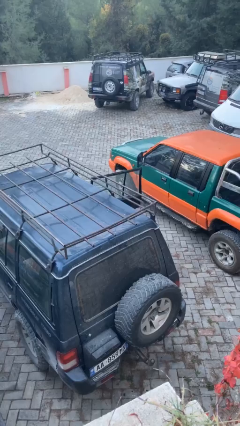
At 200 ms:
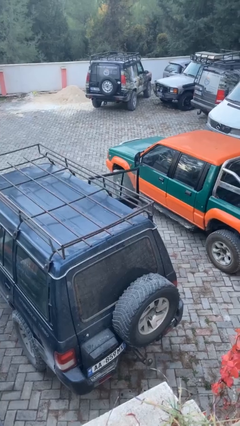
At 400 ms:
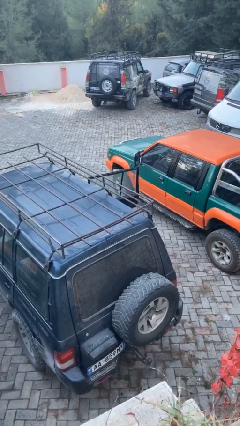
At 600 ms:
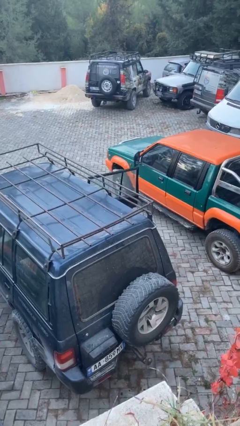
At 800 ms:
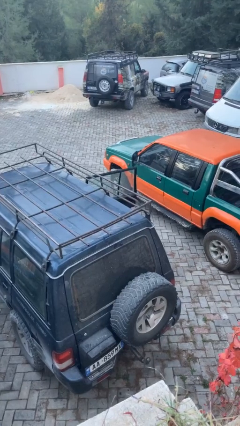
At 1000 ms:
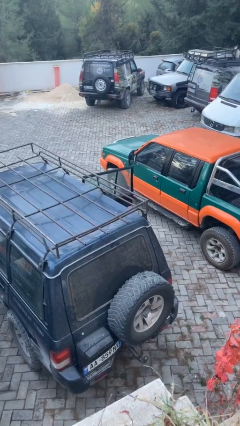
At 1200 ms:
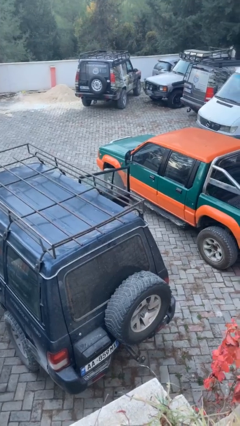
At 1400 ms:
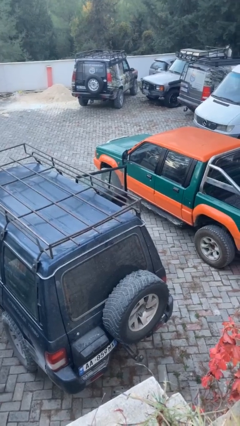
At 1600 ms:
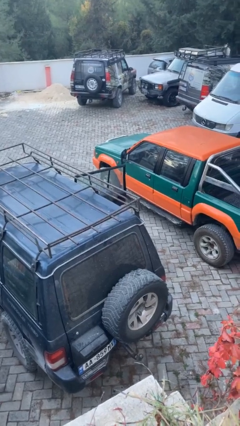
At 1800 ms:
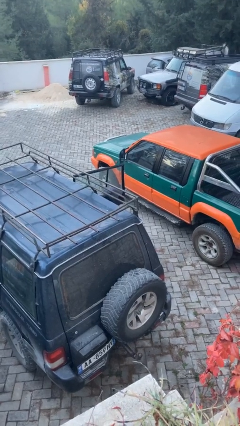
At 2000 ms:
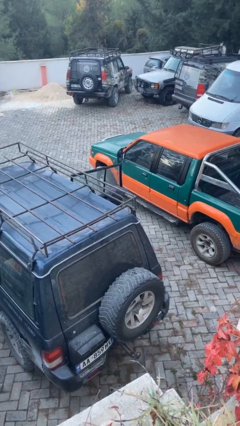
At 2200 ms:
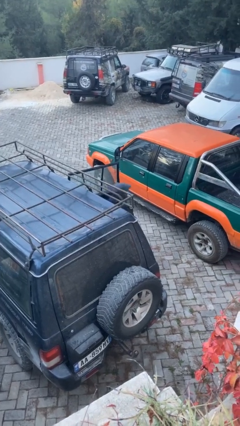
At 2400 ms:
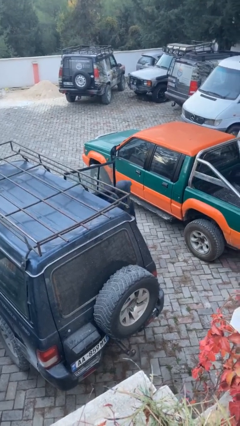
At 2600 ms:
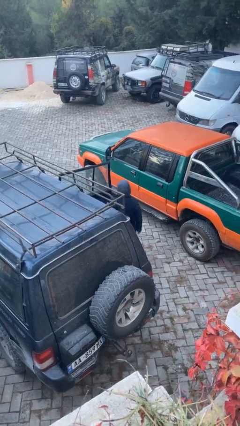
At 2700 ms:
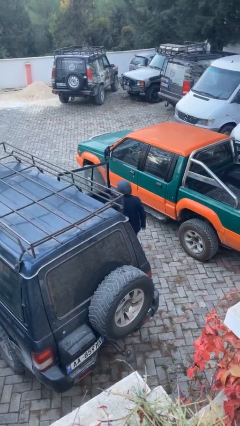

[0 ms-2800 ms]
person exits car

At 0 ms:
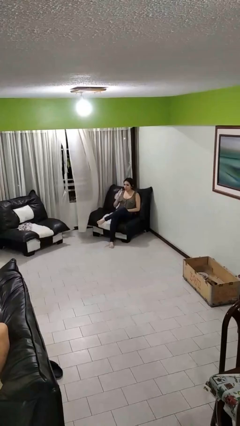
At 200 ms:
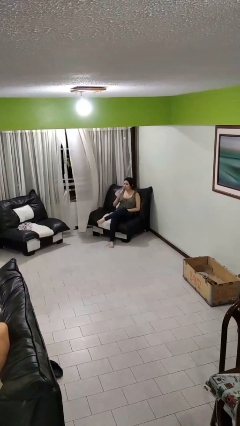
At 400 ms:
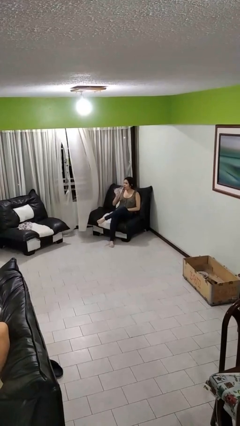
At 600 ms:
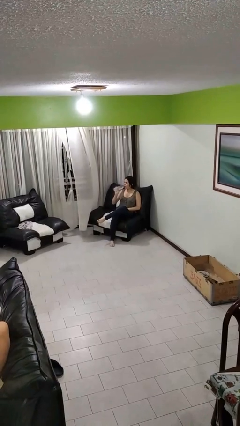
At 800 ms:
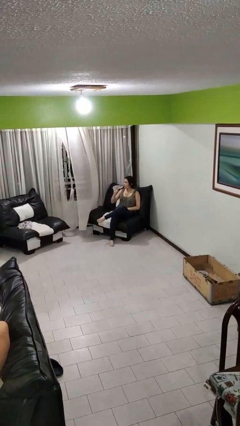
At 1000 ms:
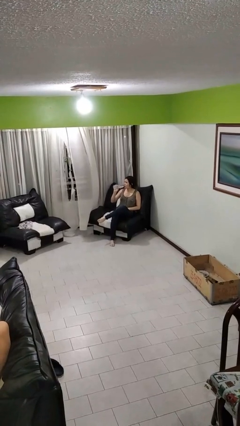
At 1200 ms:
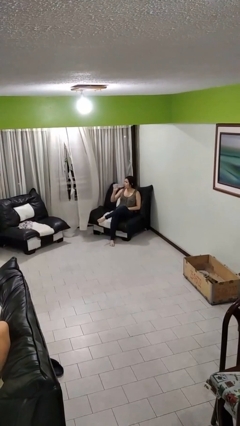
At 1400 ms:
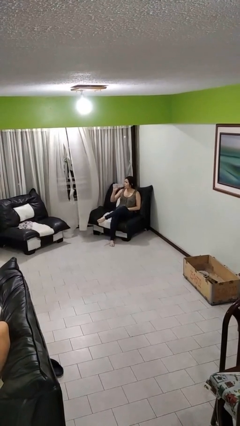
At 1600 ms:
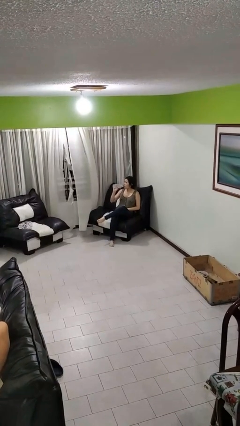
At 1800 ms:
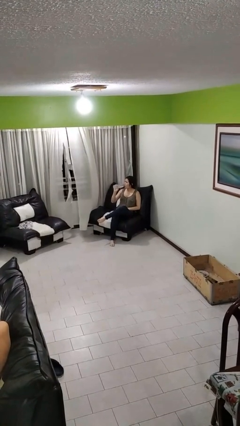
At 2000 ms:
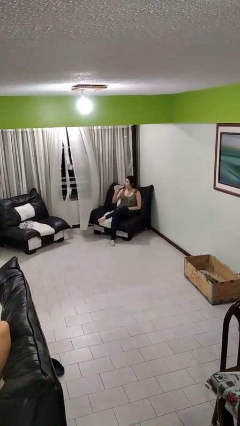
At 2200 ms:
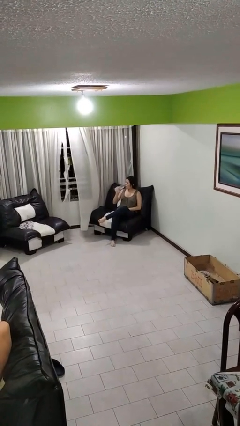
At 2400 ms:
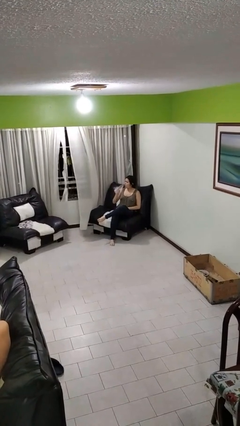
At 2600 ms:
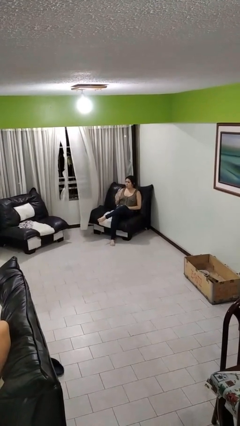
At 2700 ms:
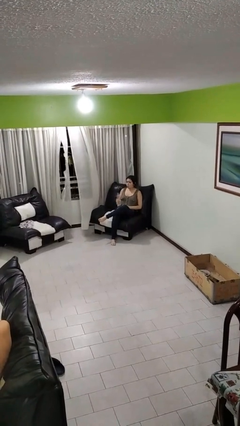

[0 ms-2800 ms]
person drinks from bottle

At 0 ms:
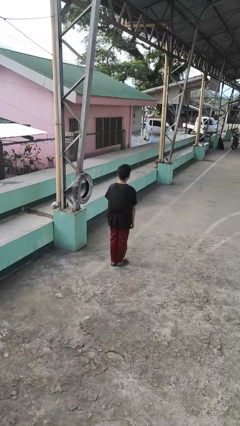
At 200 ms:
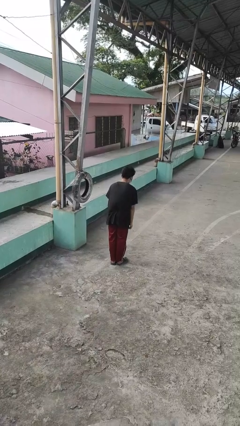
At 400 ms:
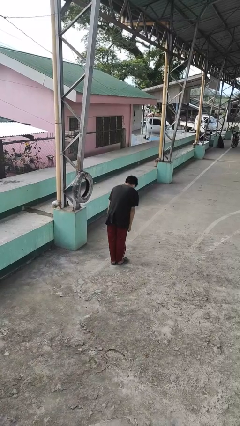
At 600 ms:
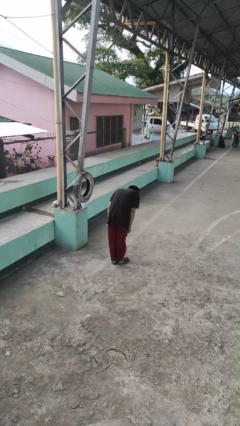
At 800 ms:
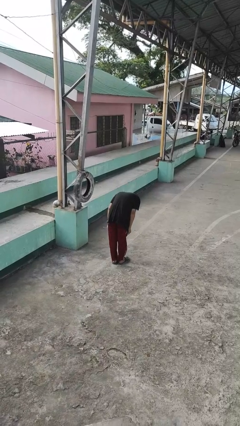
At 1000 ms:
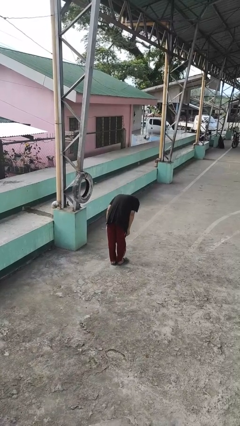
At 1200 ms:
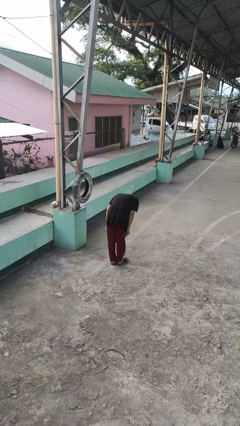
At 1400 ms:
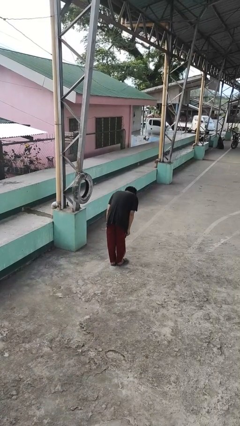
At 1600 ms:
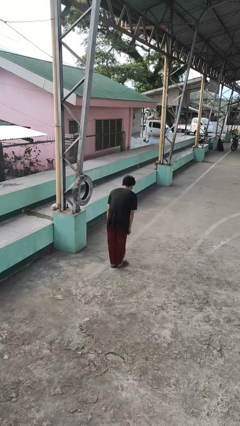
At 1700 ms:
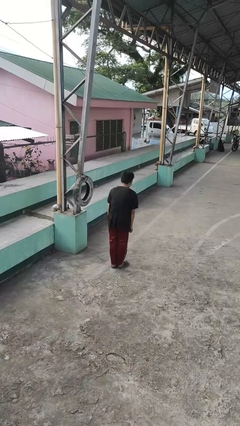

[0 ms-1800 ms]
person bows

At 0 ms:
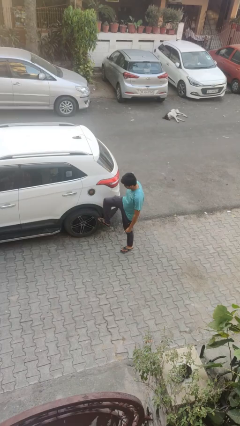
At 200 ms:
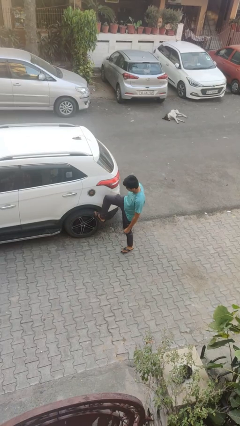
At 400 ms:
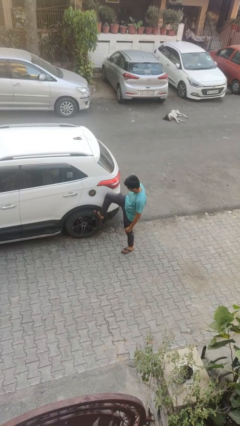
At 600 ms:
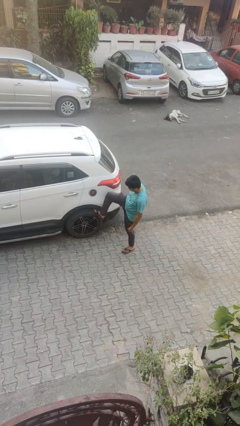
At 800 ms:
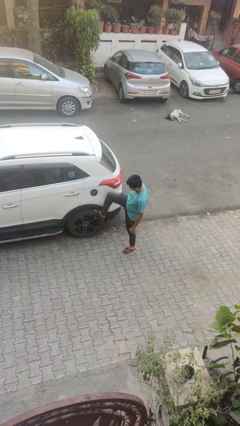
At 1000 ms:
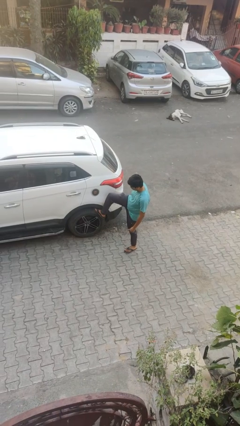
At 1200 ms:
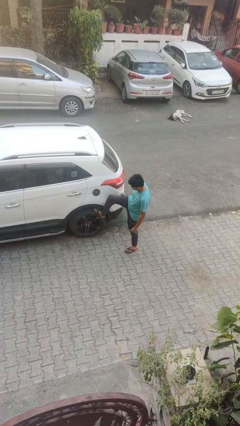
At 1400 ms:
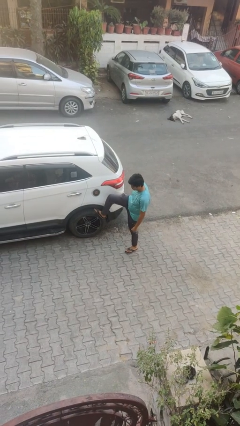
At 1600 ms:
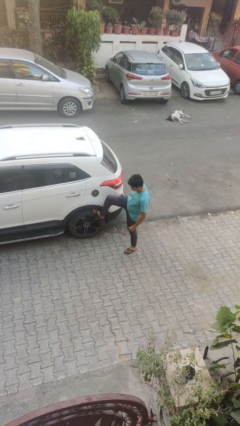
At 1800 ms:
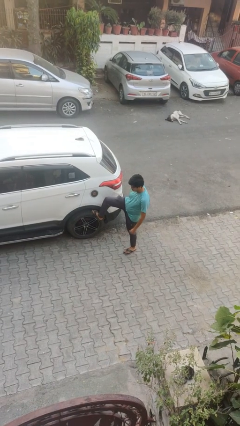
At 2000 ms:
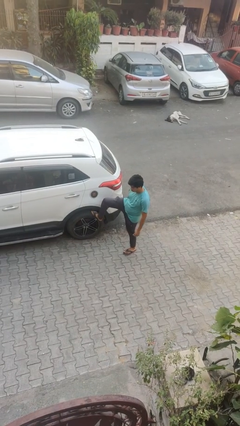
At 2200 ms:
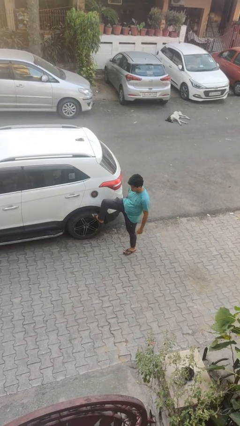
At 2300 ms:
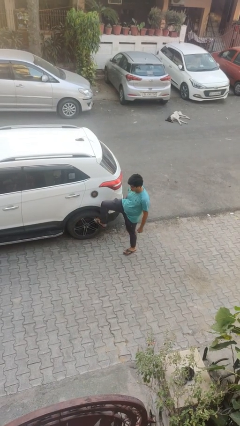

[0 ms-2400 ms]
person kicks car tires

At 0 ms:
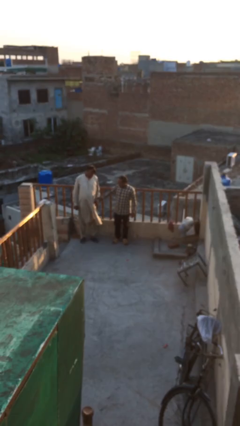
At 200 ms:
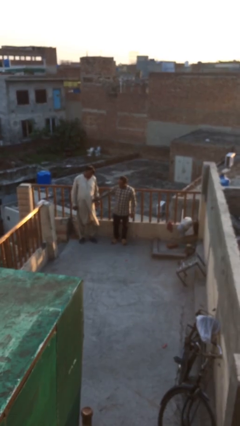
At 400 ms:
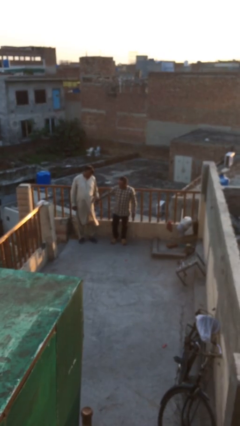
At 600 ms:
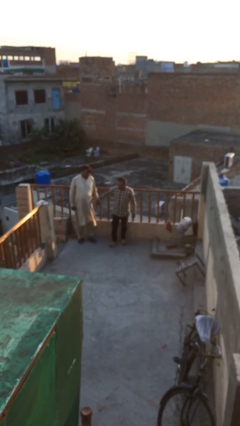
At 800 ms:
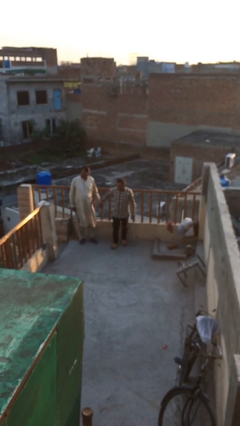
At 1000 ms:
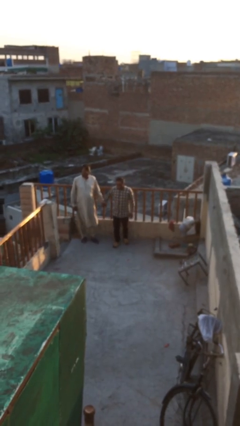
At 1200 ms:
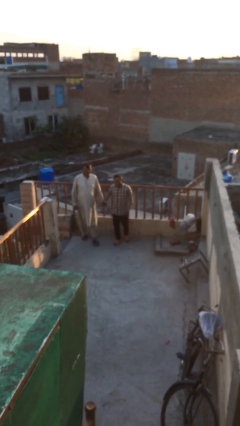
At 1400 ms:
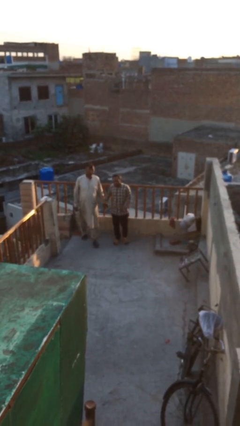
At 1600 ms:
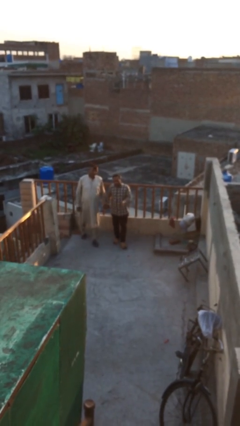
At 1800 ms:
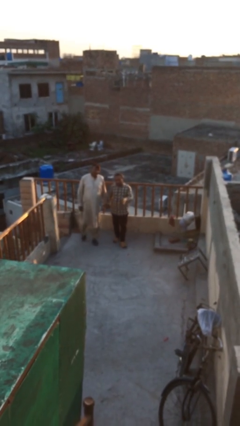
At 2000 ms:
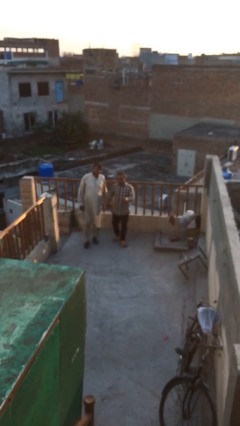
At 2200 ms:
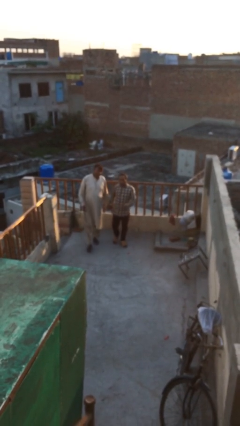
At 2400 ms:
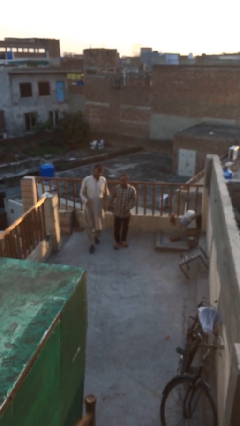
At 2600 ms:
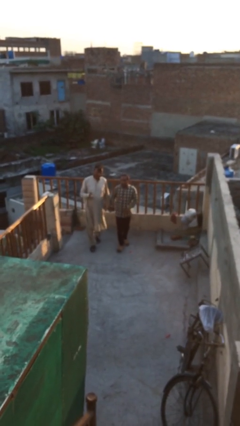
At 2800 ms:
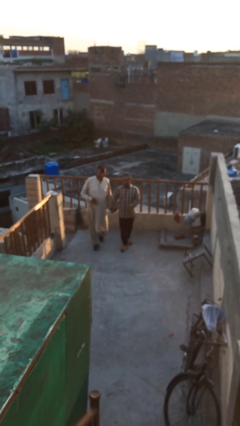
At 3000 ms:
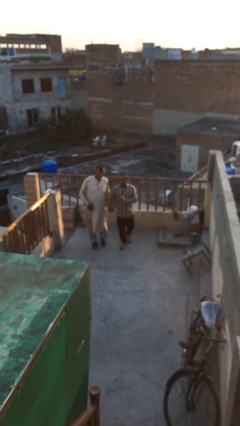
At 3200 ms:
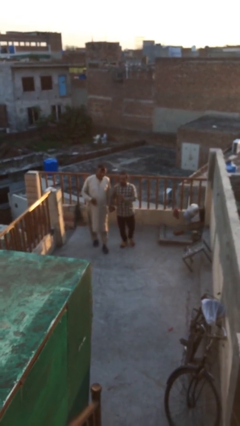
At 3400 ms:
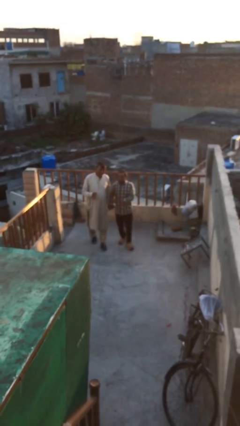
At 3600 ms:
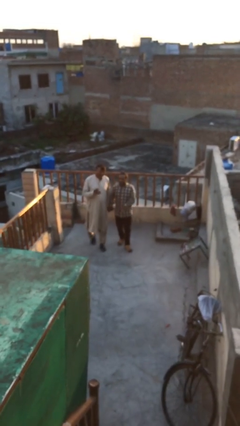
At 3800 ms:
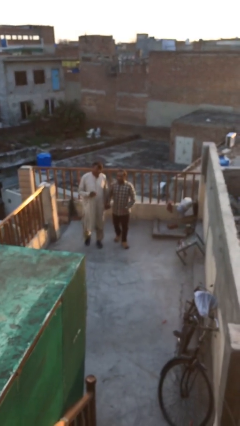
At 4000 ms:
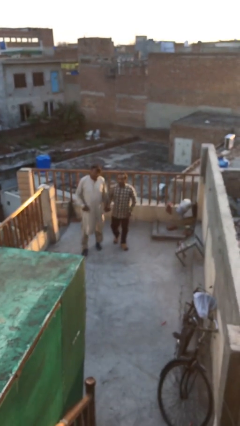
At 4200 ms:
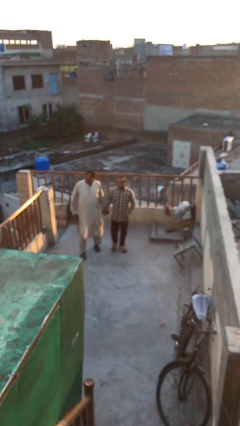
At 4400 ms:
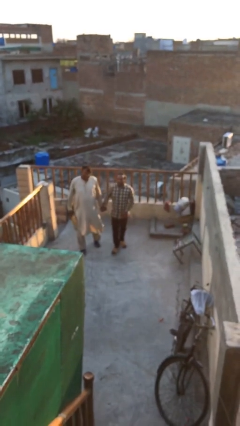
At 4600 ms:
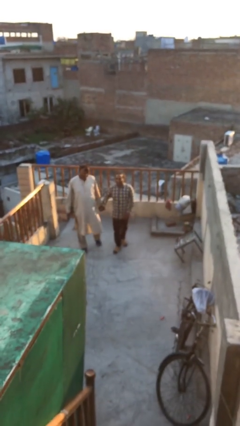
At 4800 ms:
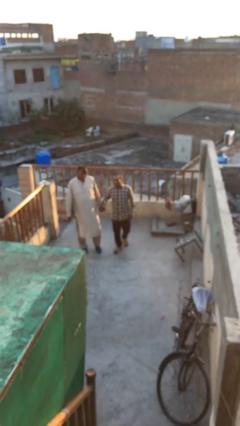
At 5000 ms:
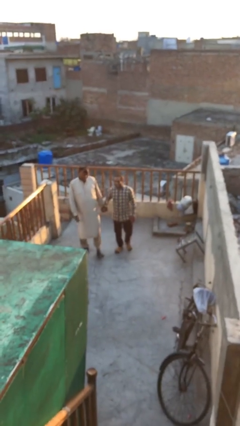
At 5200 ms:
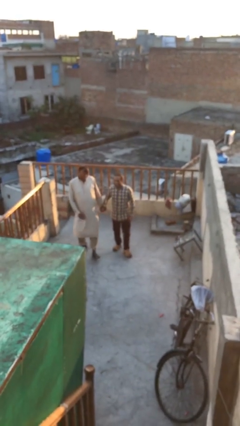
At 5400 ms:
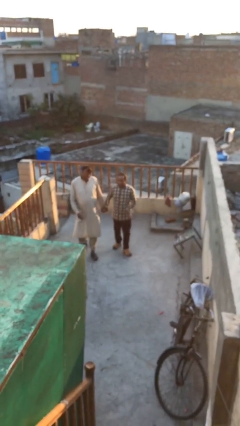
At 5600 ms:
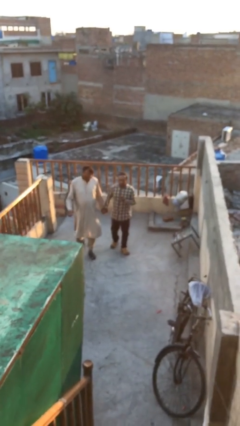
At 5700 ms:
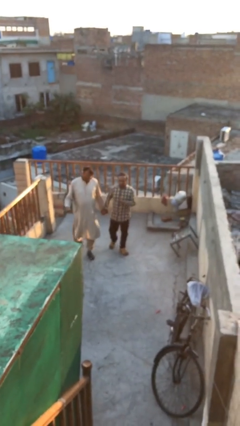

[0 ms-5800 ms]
person holds hand

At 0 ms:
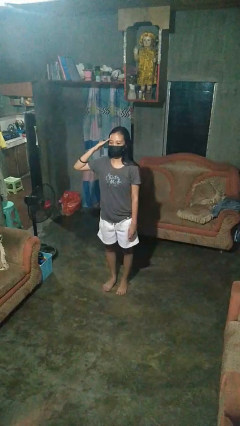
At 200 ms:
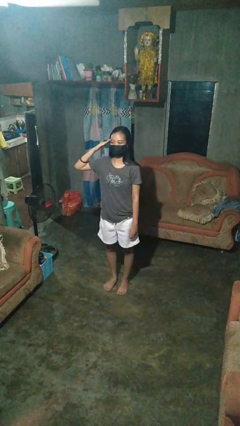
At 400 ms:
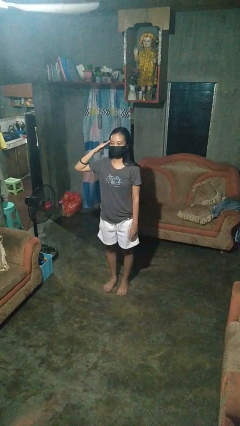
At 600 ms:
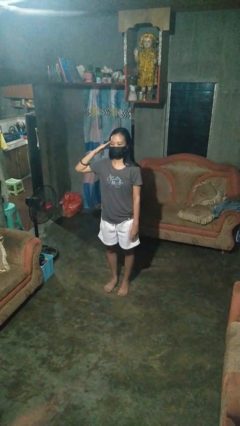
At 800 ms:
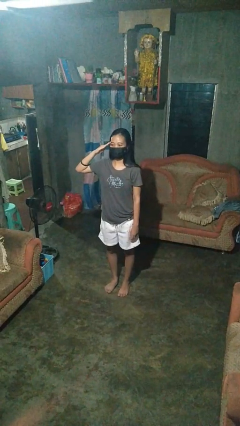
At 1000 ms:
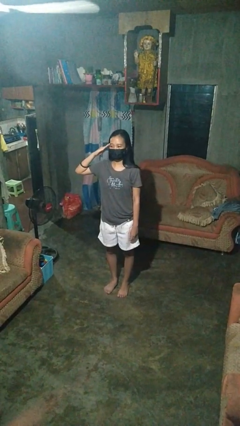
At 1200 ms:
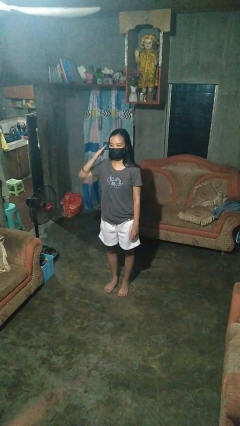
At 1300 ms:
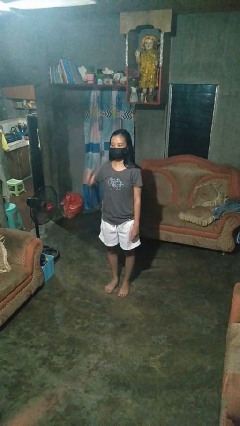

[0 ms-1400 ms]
person salutes
